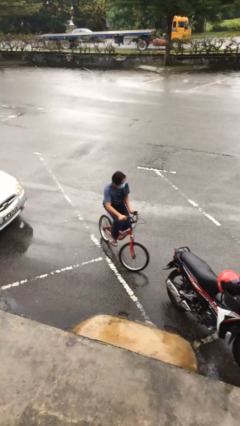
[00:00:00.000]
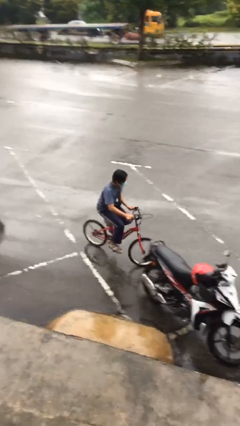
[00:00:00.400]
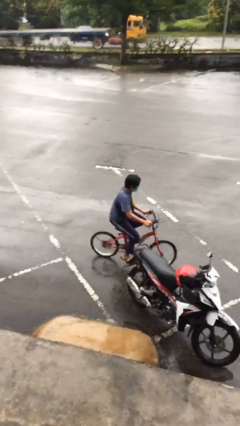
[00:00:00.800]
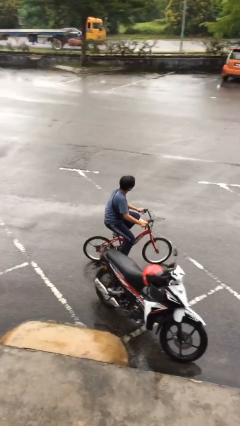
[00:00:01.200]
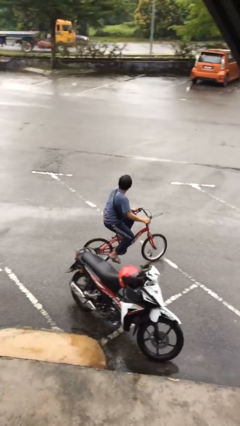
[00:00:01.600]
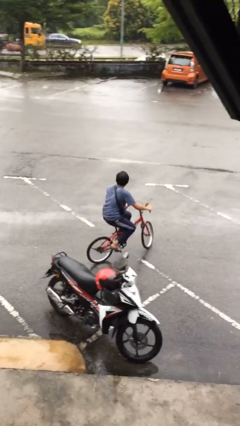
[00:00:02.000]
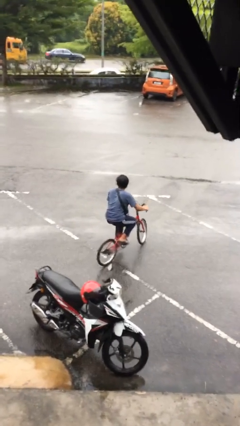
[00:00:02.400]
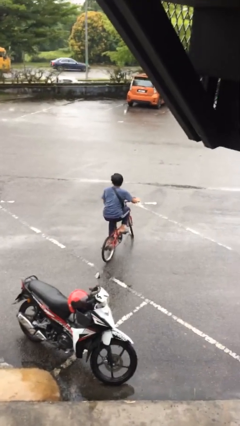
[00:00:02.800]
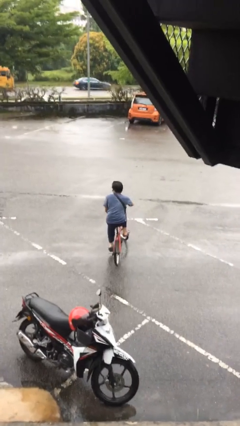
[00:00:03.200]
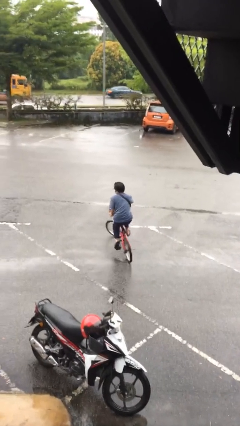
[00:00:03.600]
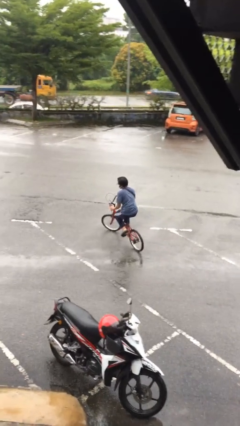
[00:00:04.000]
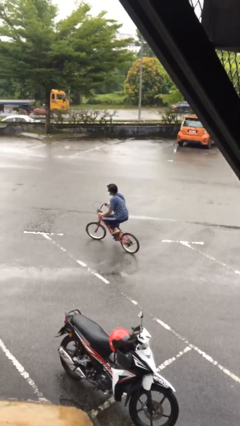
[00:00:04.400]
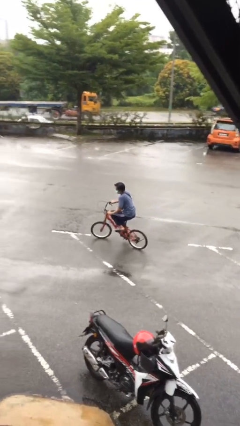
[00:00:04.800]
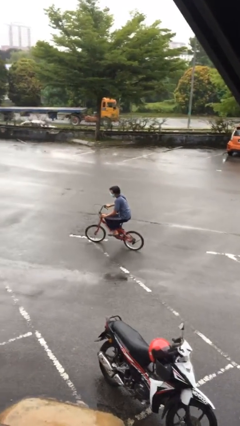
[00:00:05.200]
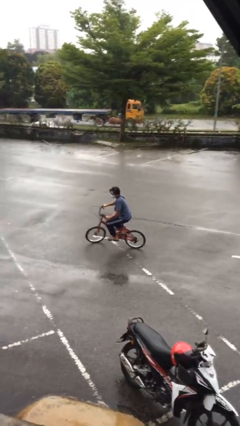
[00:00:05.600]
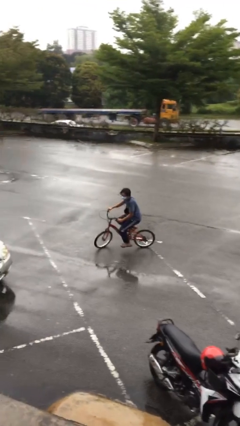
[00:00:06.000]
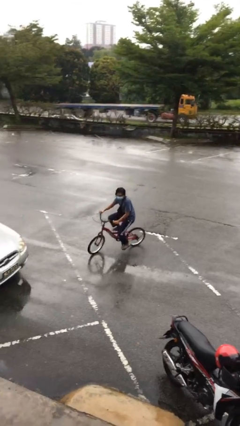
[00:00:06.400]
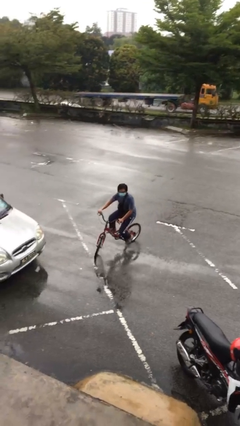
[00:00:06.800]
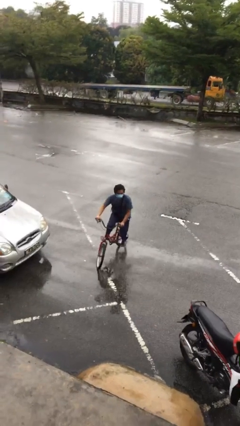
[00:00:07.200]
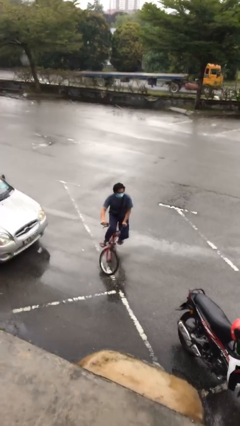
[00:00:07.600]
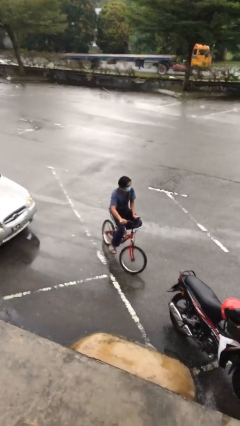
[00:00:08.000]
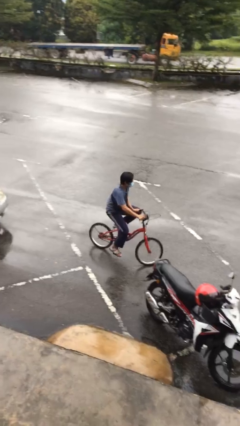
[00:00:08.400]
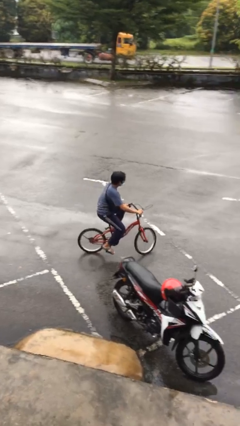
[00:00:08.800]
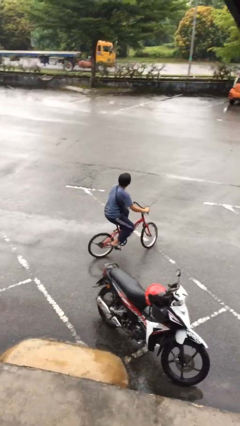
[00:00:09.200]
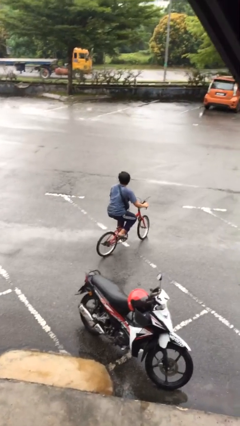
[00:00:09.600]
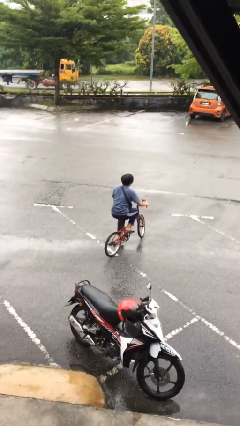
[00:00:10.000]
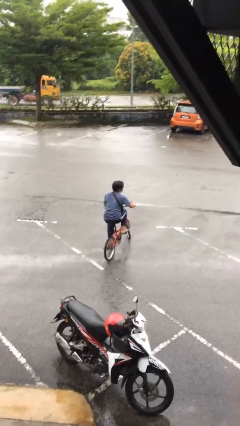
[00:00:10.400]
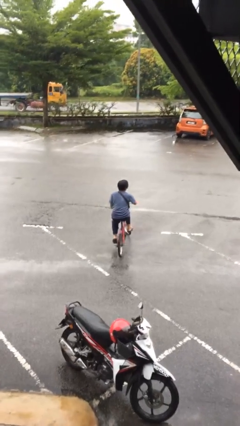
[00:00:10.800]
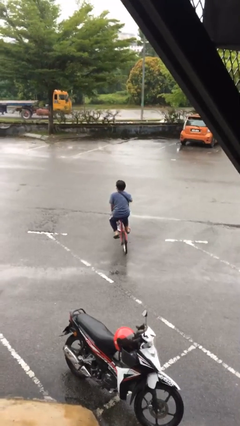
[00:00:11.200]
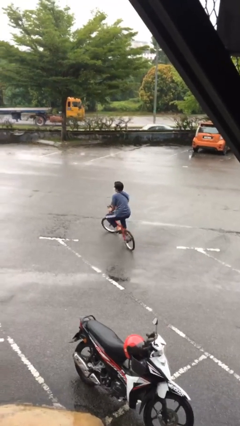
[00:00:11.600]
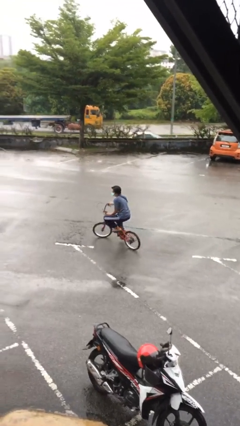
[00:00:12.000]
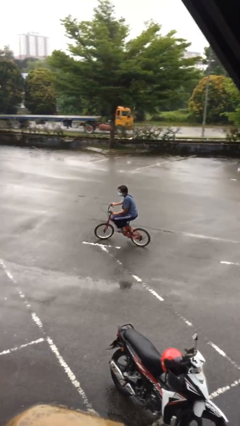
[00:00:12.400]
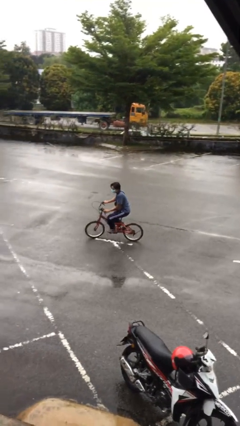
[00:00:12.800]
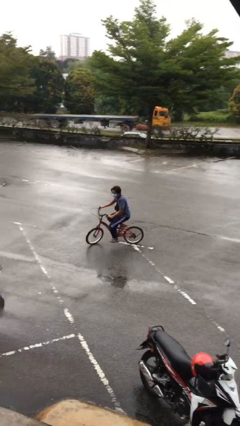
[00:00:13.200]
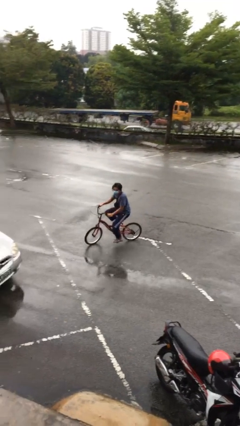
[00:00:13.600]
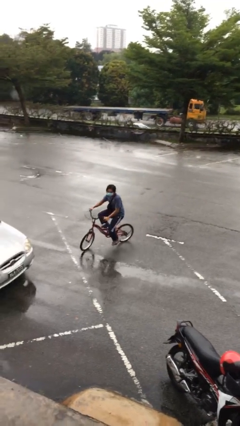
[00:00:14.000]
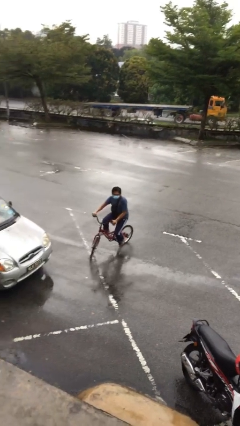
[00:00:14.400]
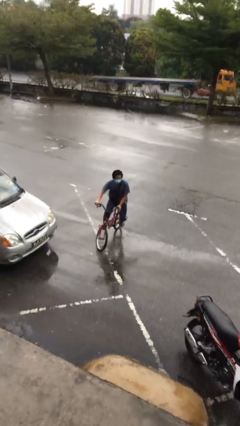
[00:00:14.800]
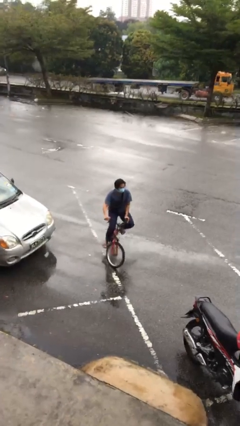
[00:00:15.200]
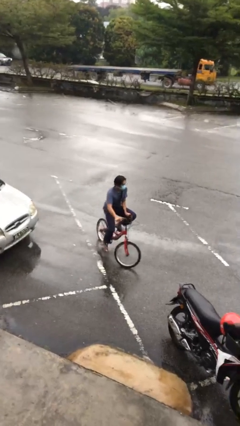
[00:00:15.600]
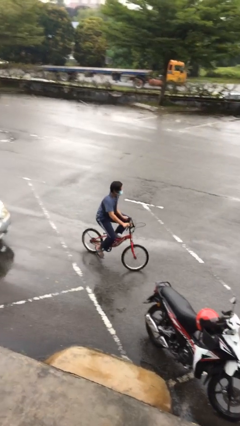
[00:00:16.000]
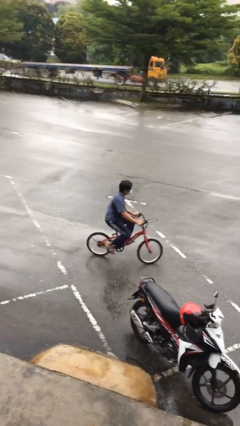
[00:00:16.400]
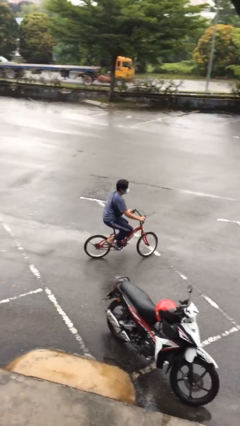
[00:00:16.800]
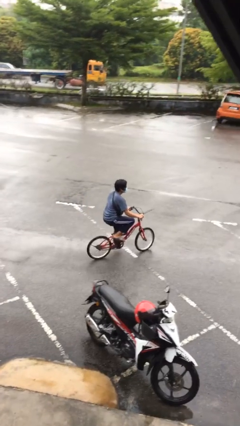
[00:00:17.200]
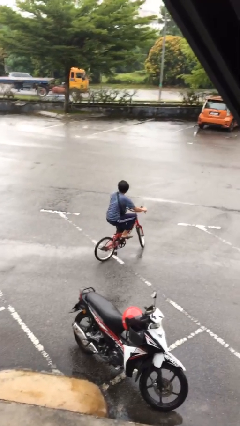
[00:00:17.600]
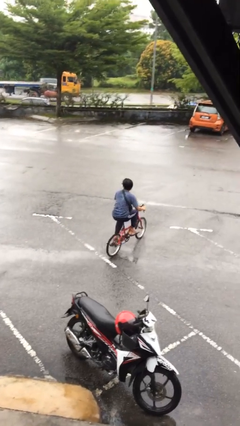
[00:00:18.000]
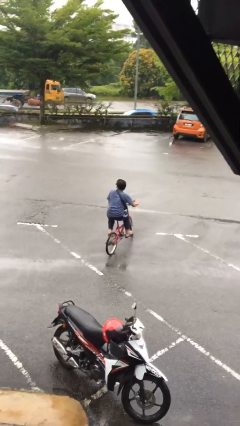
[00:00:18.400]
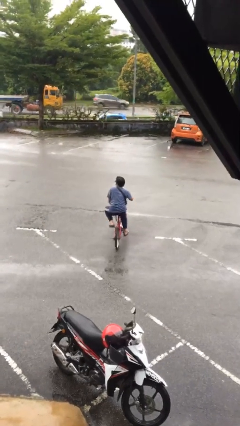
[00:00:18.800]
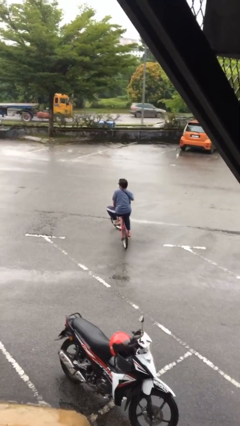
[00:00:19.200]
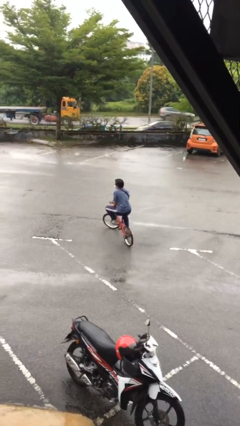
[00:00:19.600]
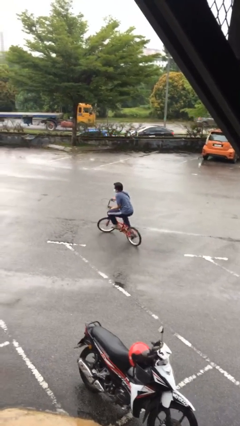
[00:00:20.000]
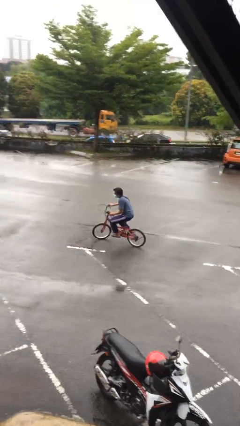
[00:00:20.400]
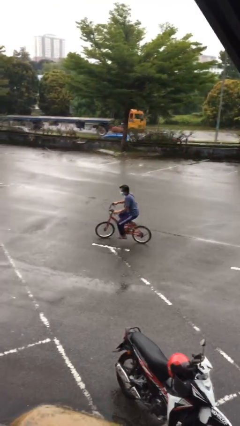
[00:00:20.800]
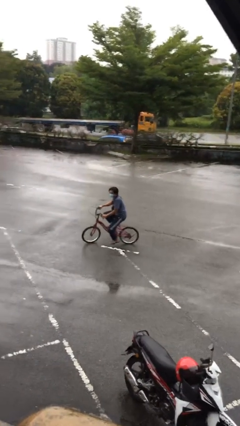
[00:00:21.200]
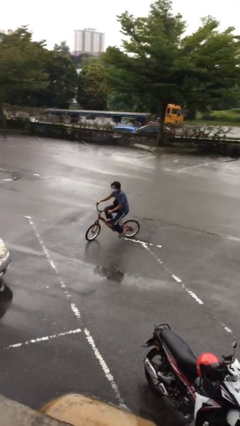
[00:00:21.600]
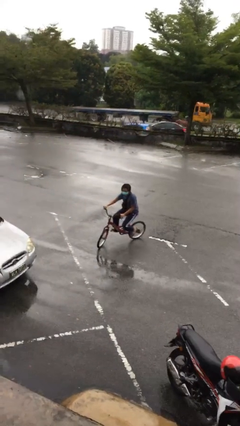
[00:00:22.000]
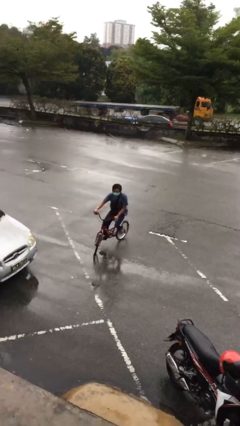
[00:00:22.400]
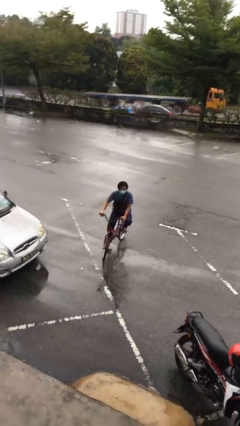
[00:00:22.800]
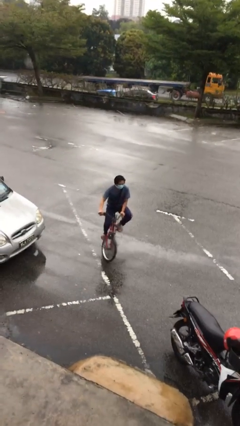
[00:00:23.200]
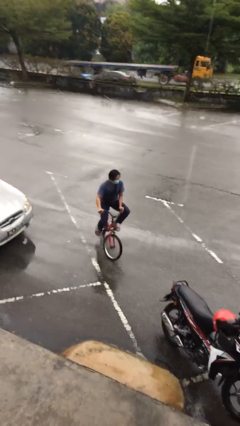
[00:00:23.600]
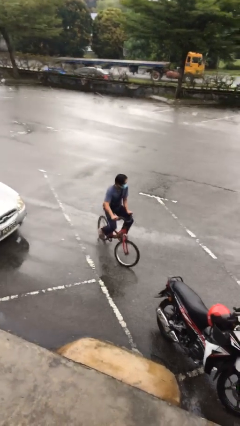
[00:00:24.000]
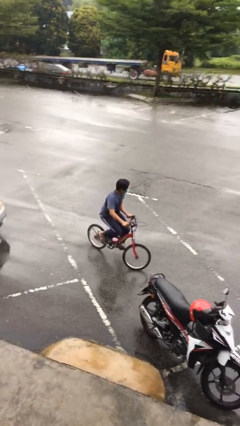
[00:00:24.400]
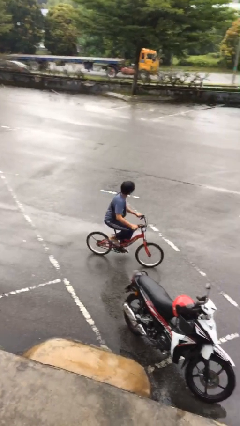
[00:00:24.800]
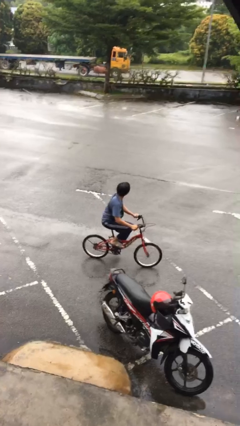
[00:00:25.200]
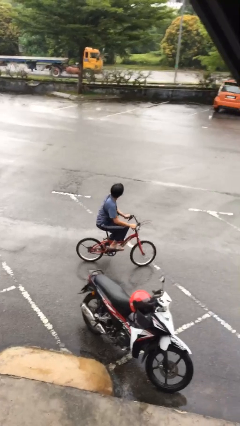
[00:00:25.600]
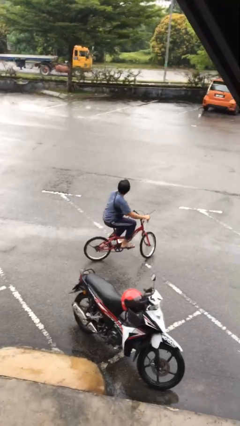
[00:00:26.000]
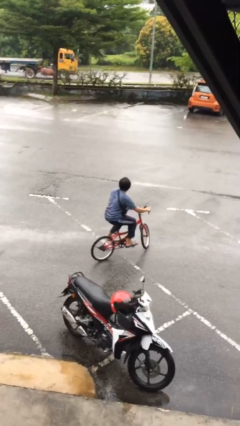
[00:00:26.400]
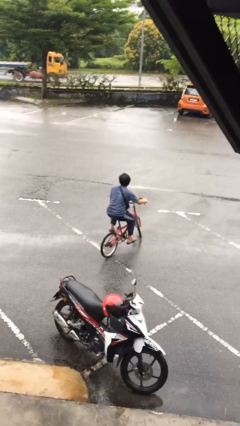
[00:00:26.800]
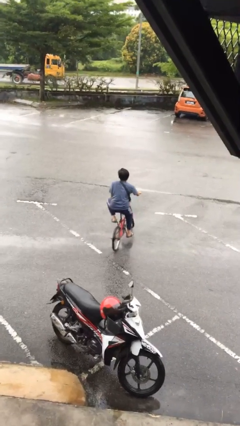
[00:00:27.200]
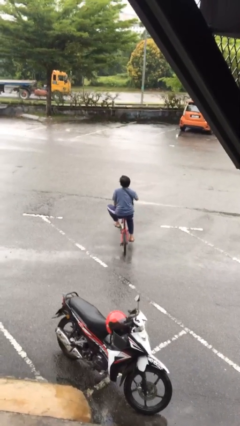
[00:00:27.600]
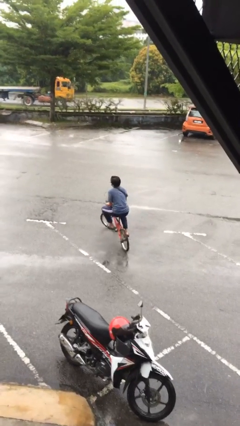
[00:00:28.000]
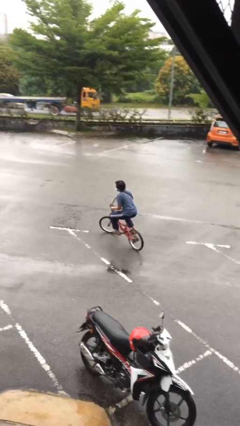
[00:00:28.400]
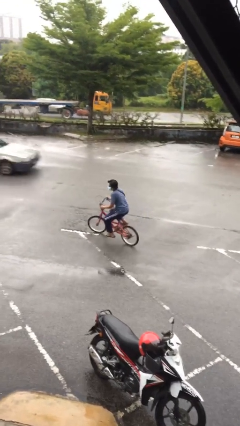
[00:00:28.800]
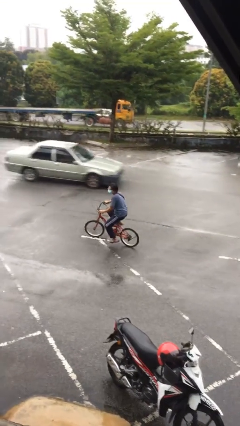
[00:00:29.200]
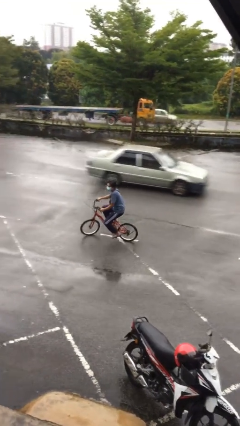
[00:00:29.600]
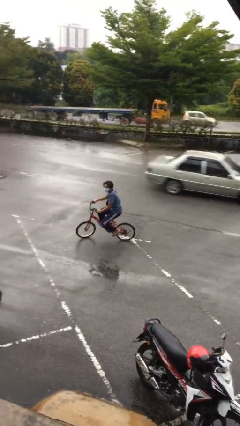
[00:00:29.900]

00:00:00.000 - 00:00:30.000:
person rides bicycle

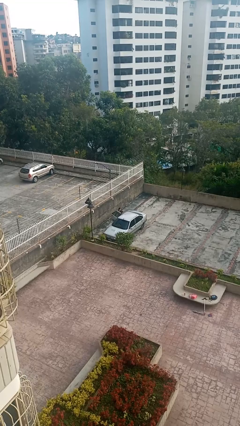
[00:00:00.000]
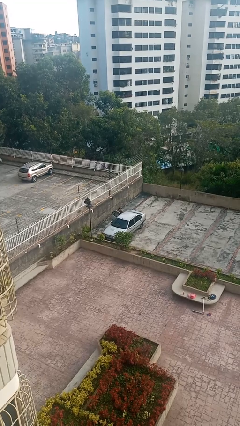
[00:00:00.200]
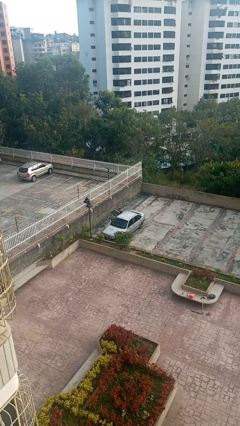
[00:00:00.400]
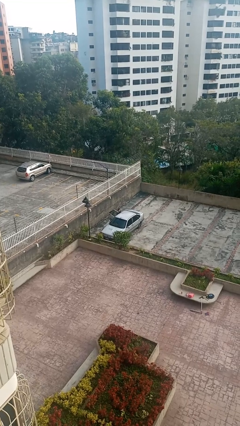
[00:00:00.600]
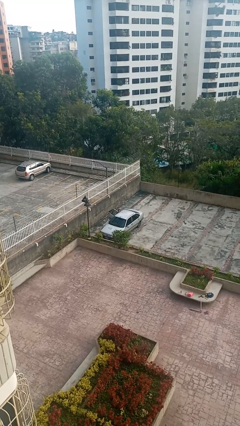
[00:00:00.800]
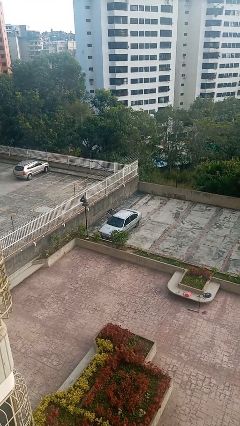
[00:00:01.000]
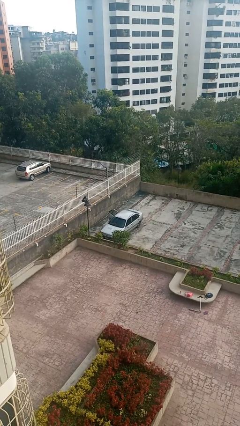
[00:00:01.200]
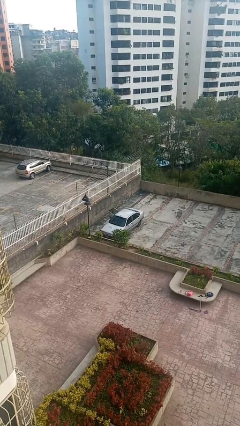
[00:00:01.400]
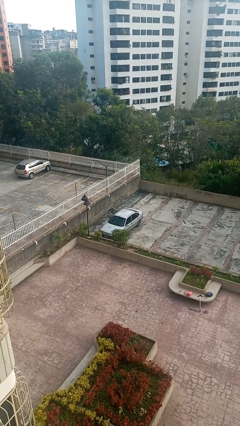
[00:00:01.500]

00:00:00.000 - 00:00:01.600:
person enters car

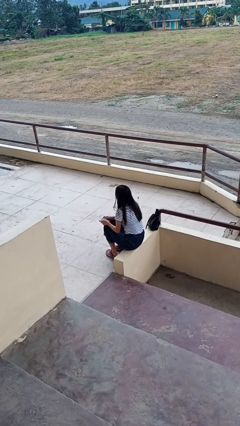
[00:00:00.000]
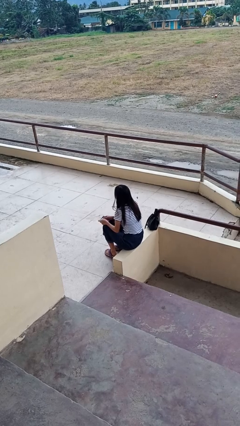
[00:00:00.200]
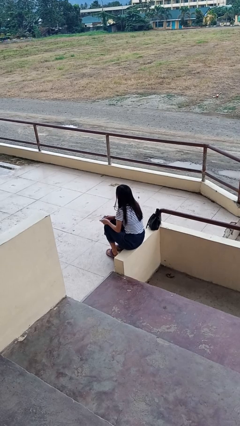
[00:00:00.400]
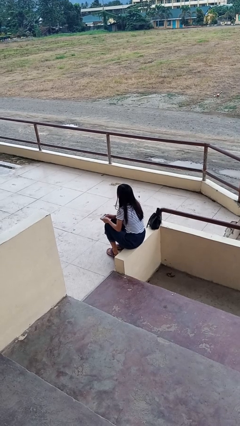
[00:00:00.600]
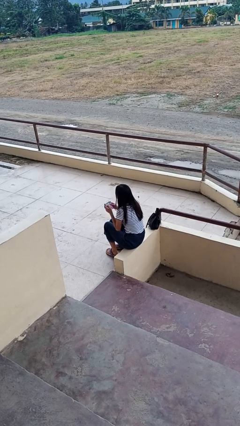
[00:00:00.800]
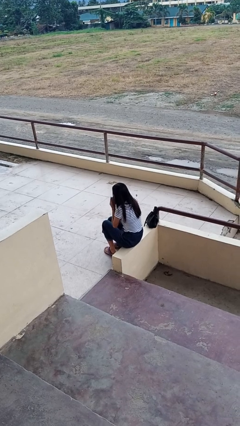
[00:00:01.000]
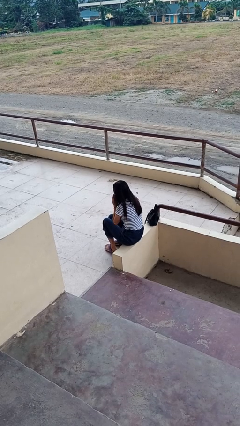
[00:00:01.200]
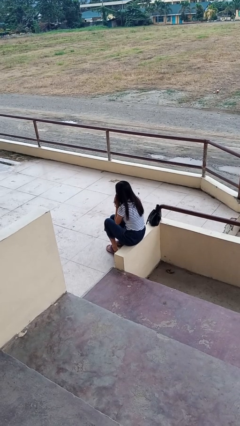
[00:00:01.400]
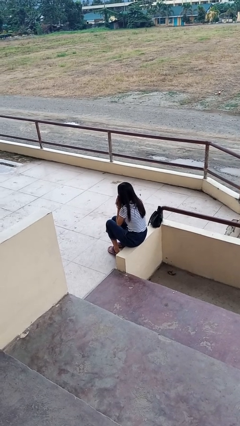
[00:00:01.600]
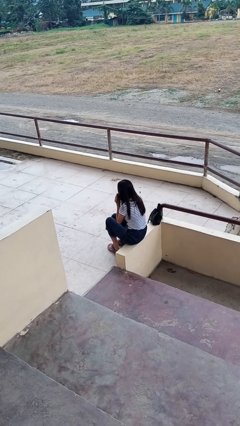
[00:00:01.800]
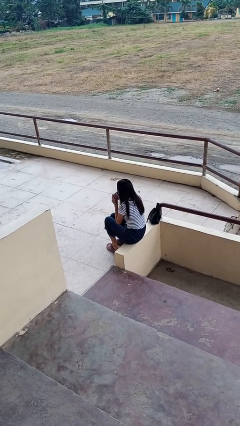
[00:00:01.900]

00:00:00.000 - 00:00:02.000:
person blows nose
